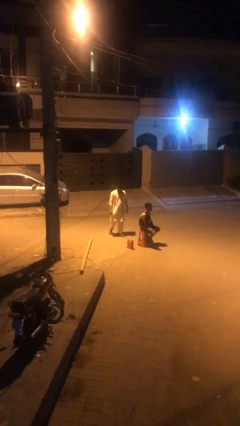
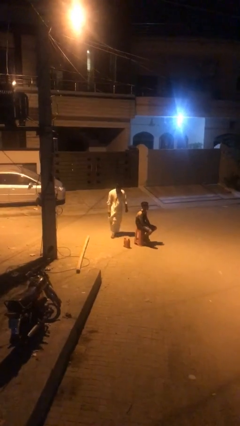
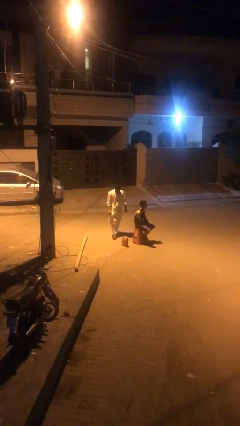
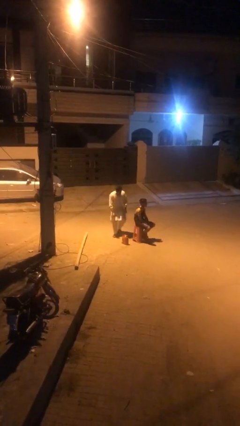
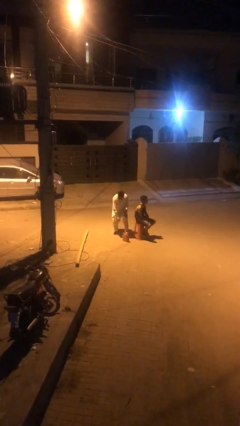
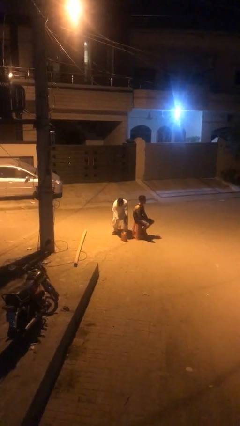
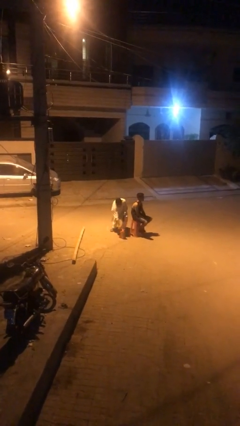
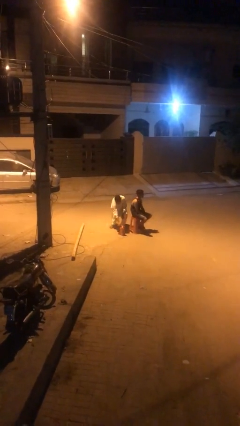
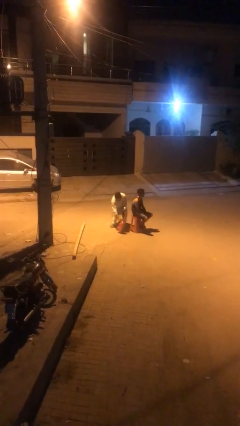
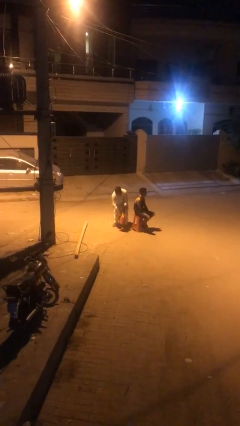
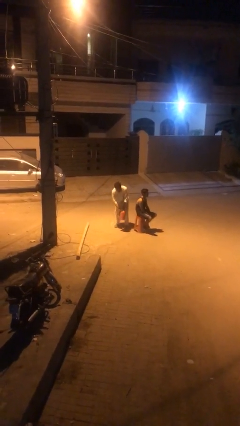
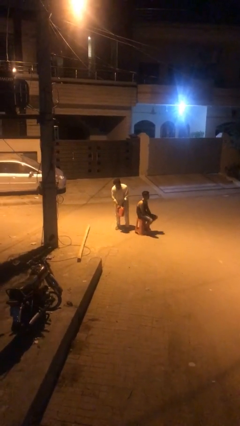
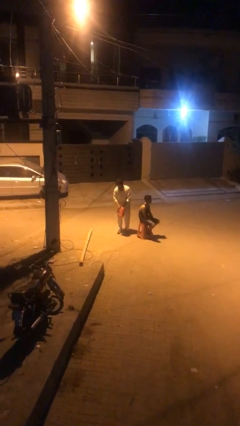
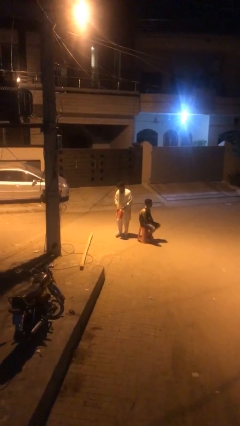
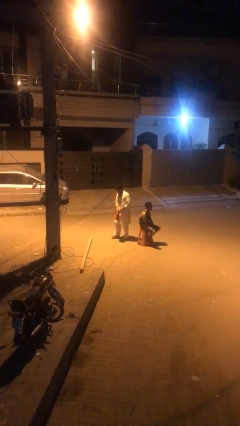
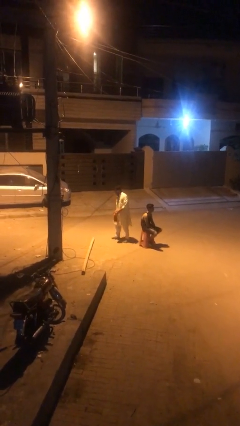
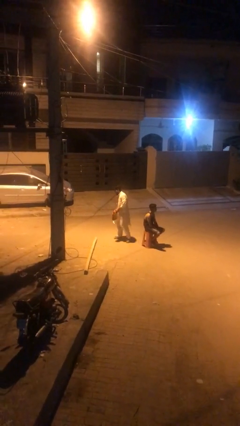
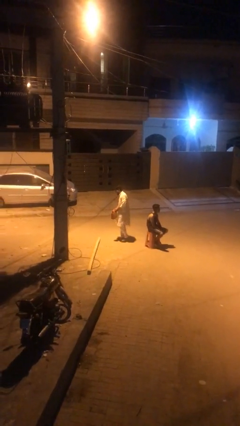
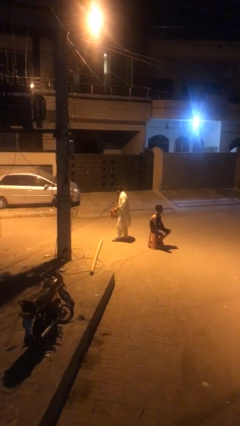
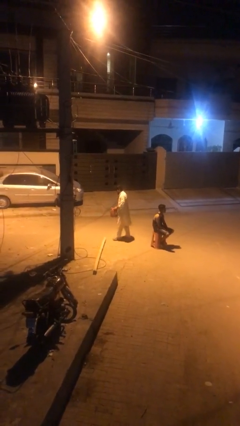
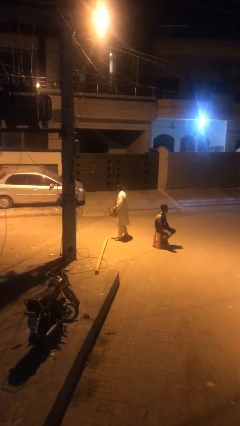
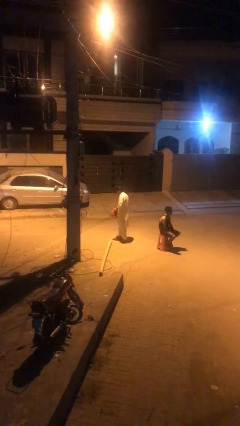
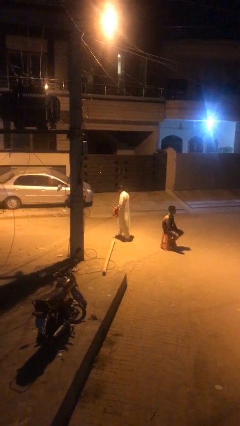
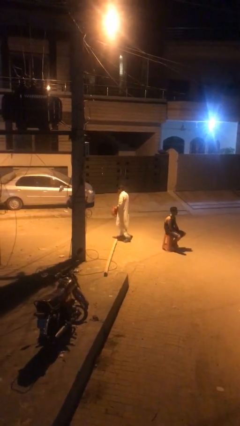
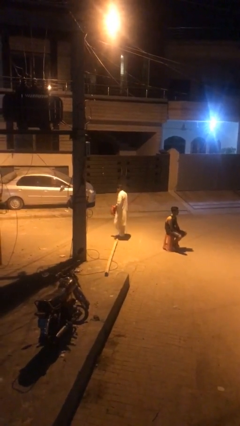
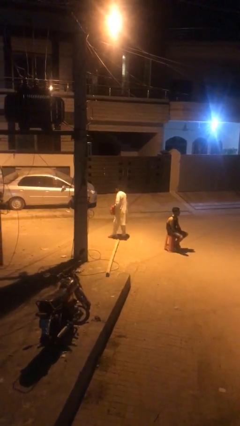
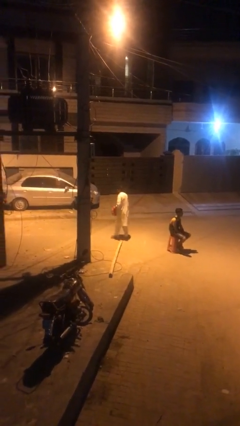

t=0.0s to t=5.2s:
person steals object from person

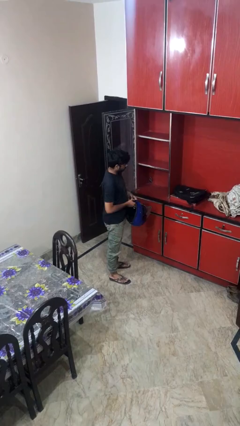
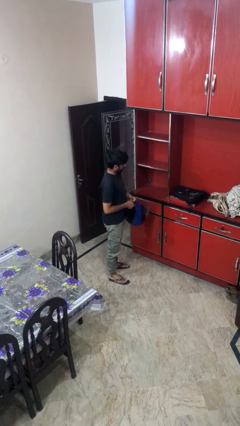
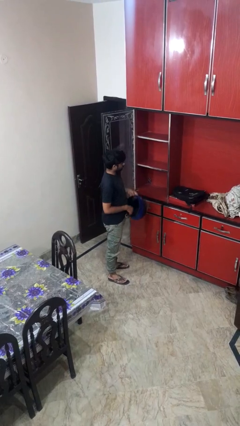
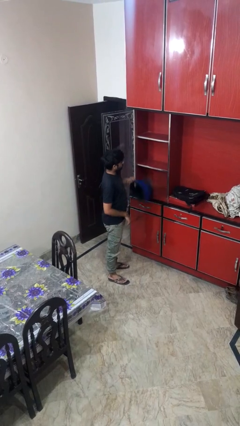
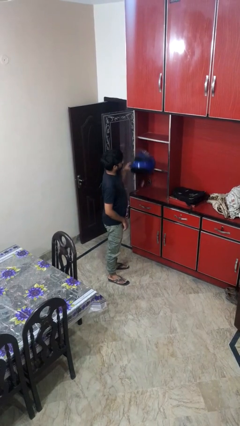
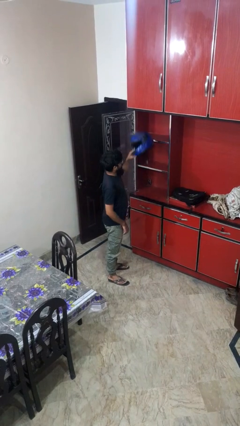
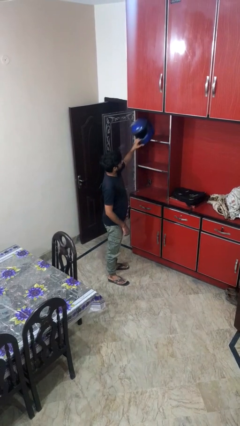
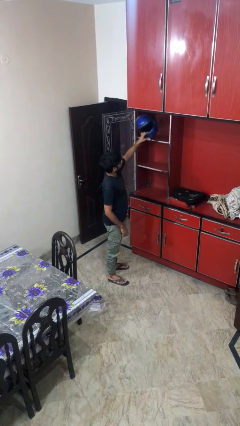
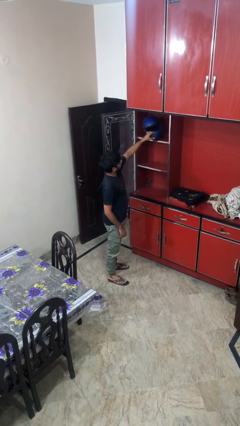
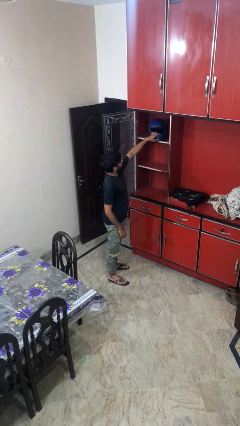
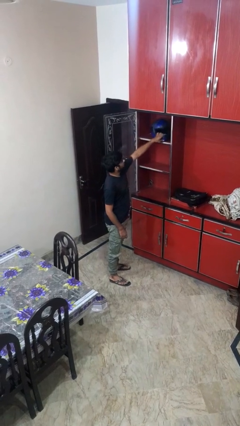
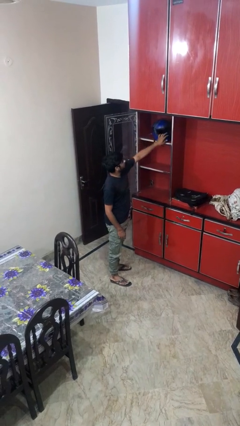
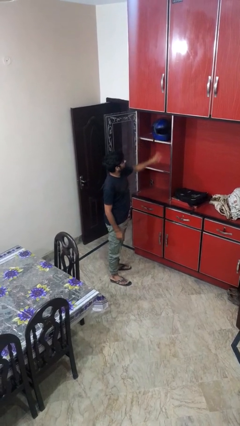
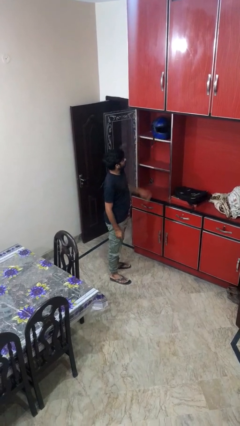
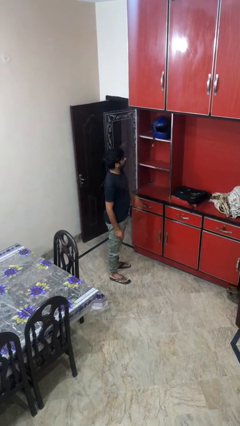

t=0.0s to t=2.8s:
person puts down object on shelf

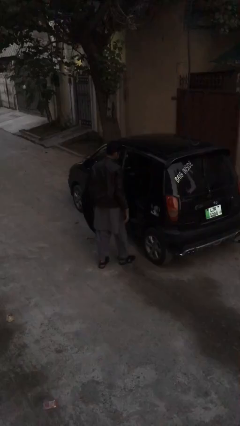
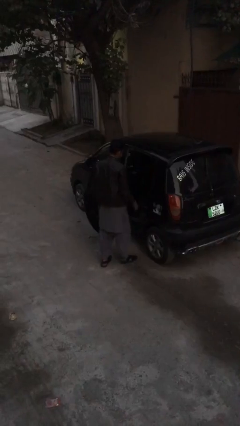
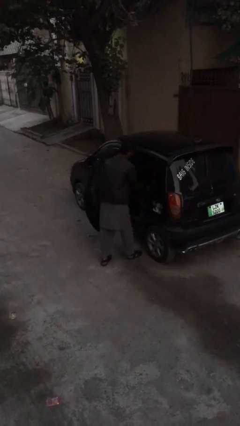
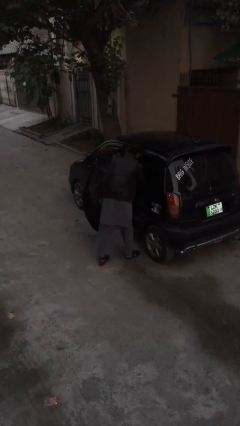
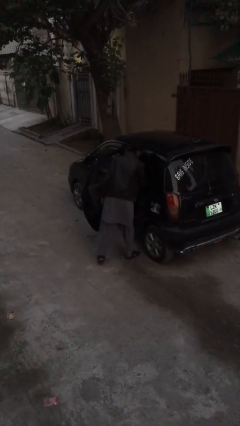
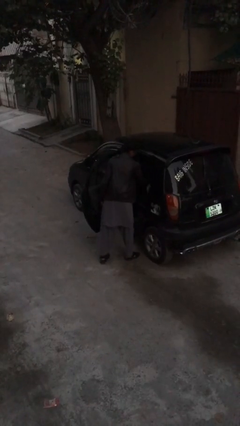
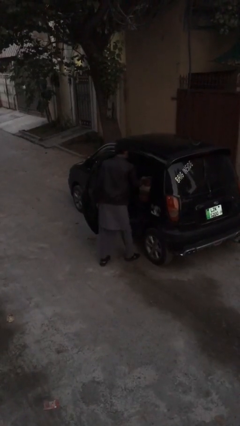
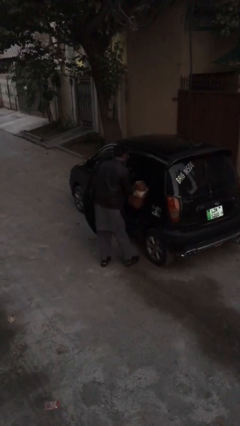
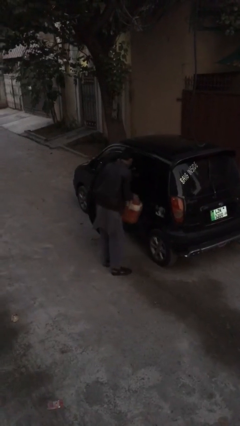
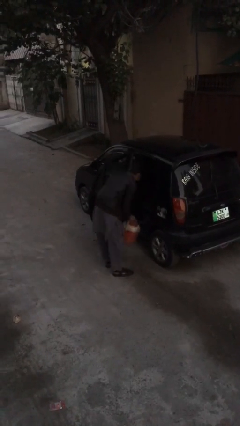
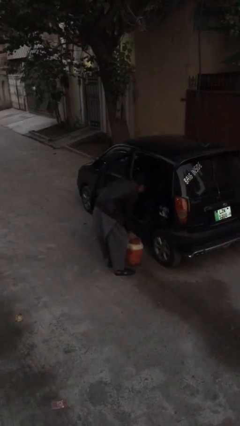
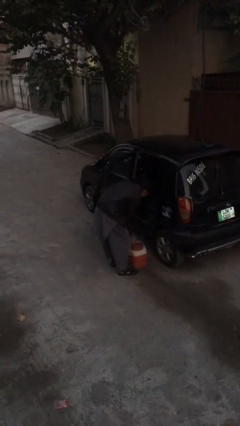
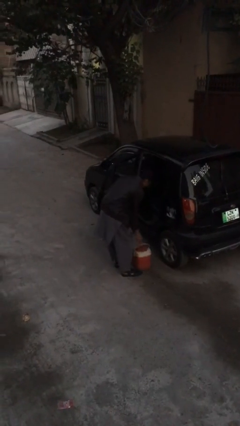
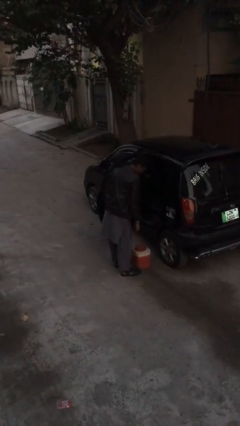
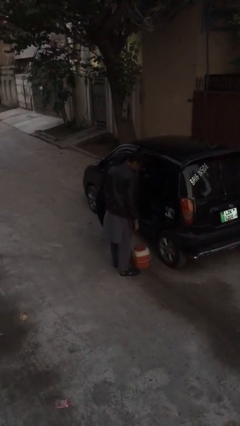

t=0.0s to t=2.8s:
person unloads car

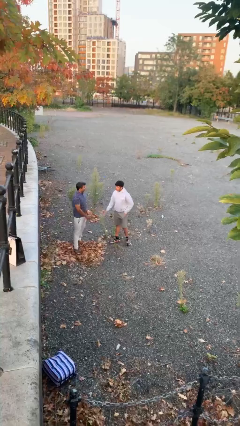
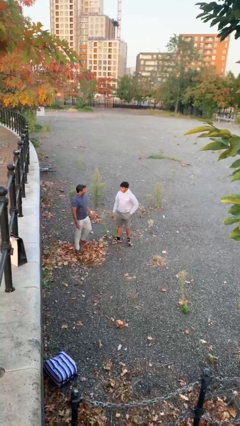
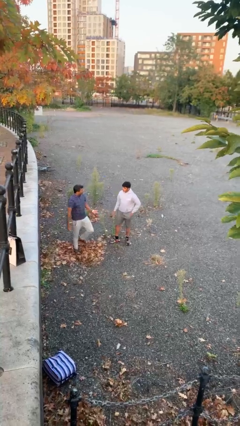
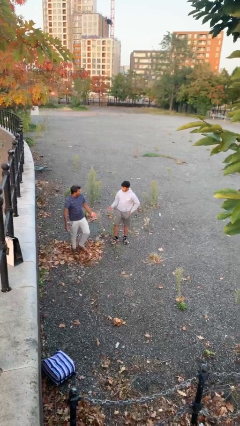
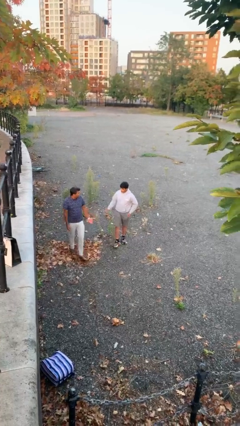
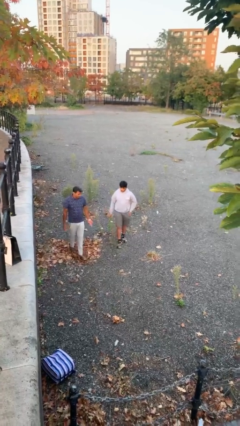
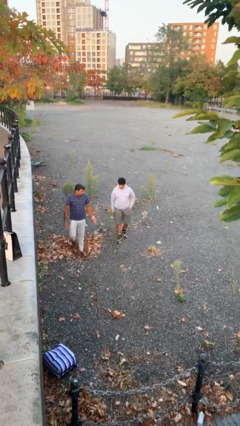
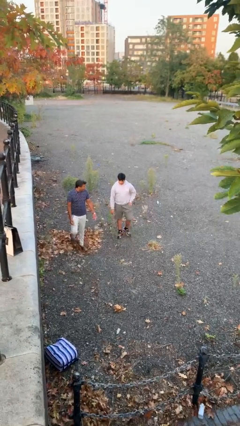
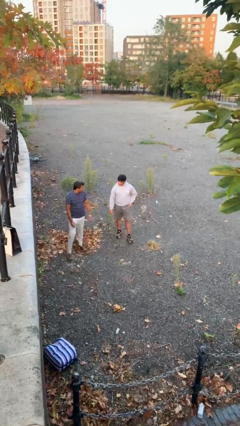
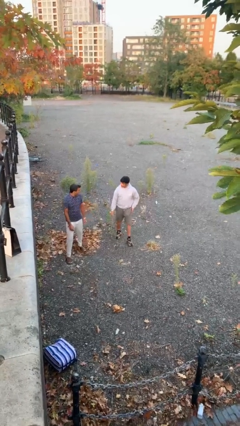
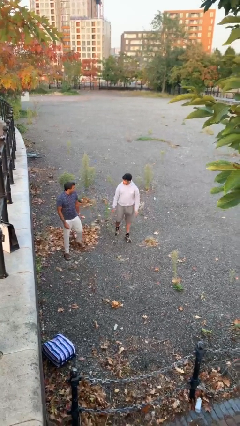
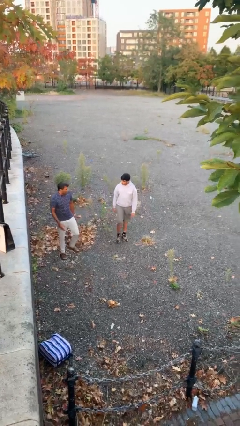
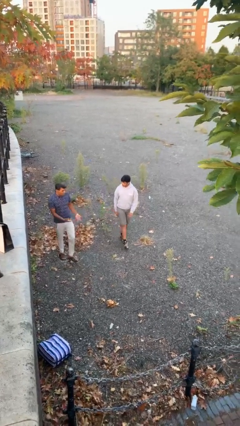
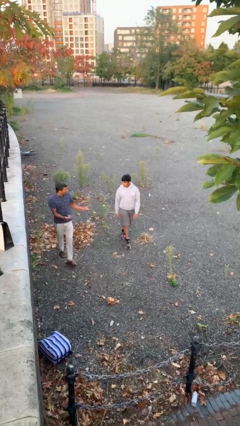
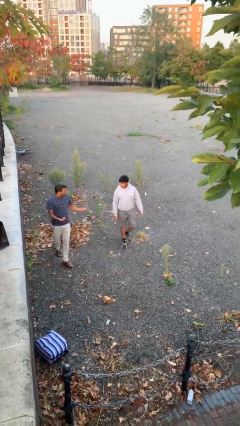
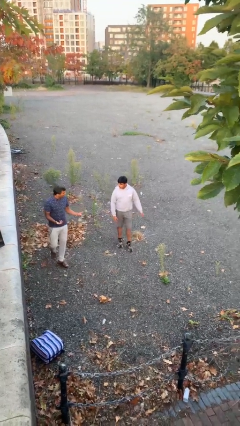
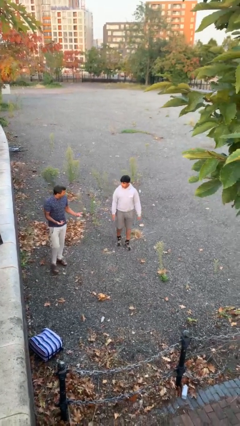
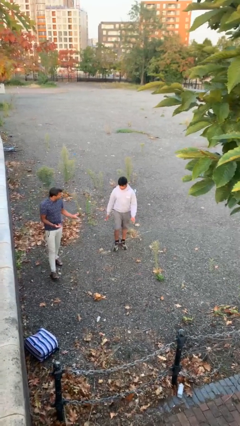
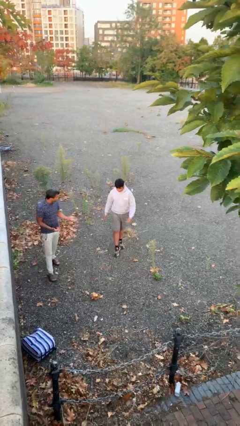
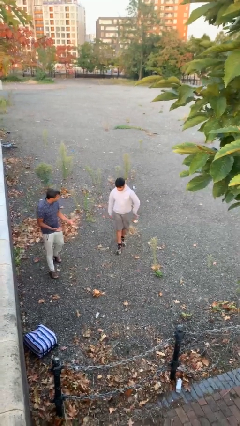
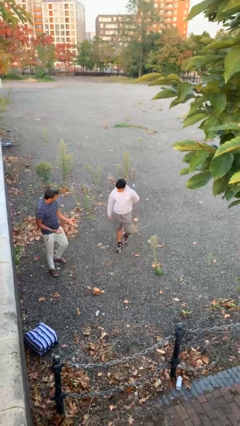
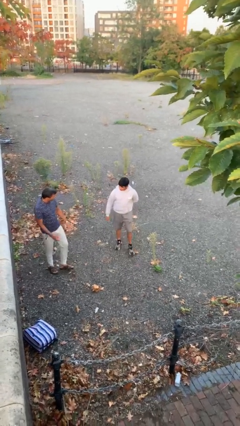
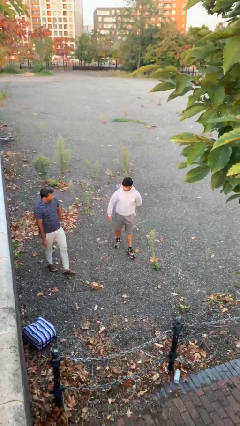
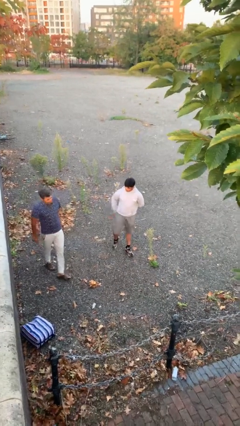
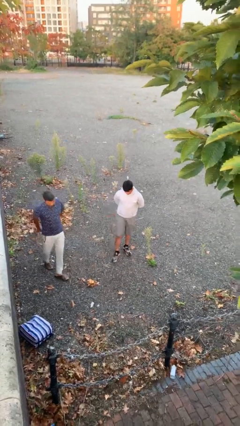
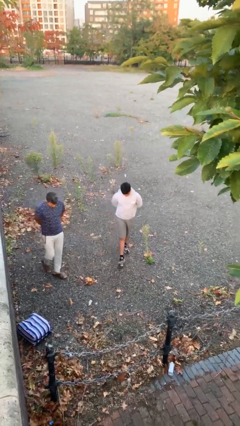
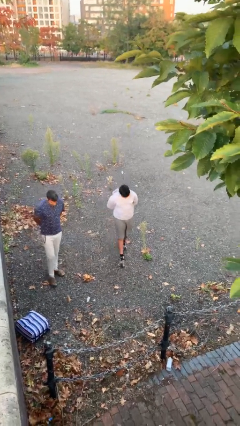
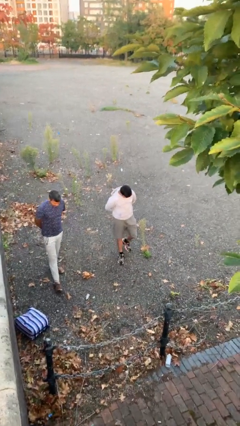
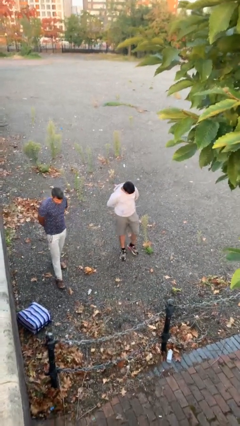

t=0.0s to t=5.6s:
person talks to person

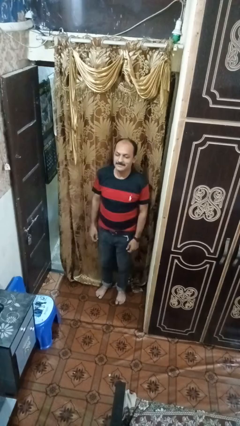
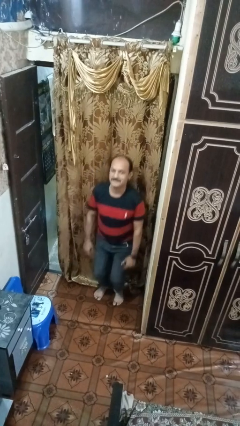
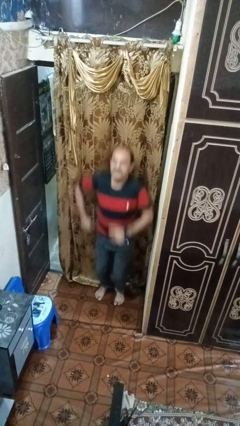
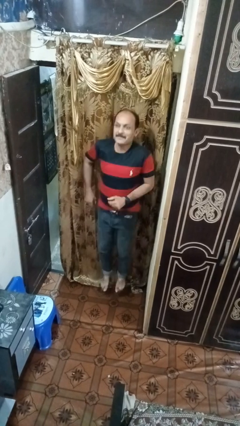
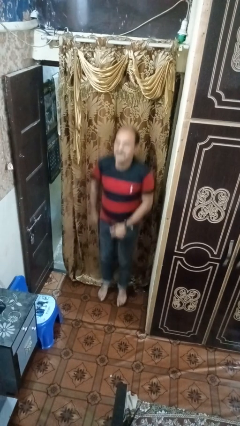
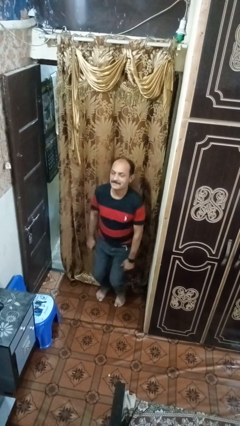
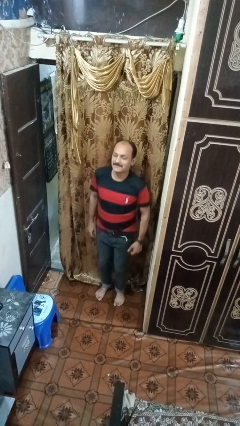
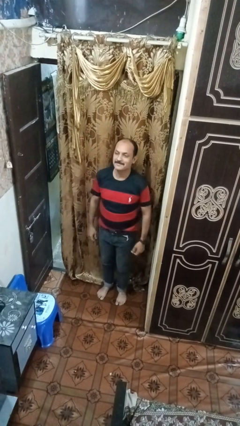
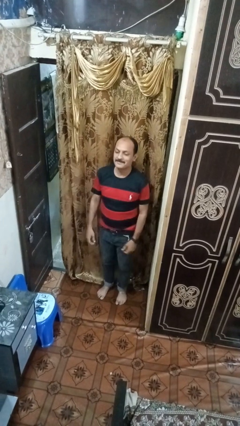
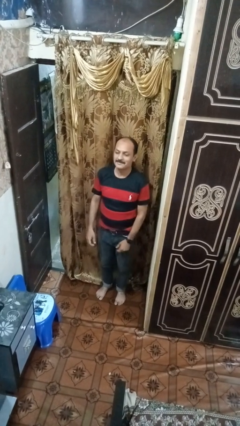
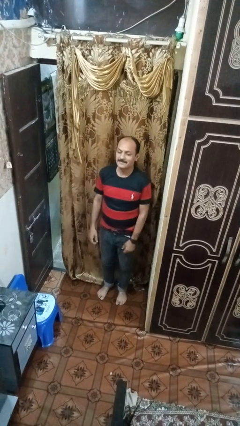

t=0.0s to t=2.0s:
person jumps
